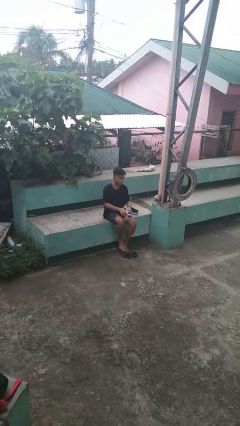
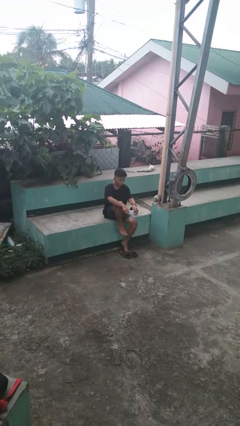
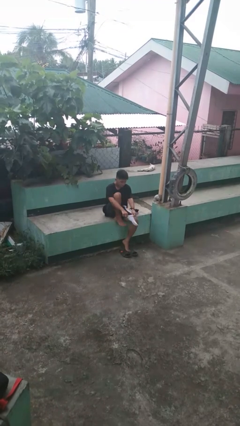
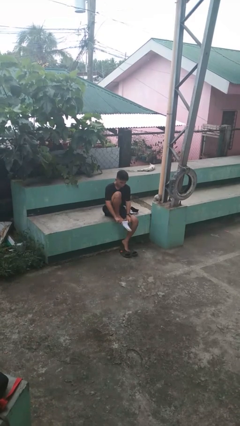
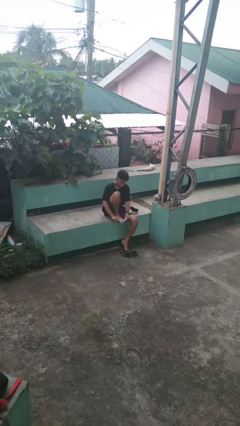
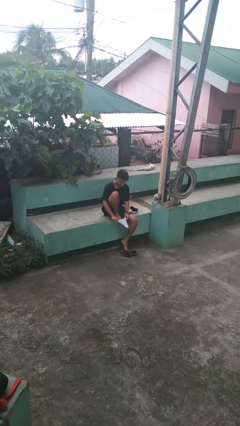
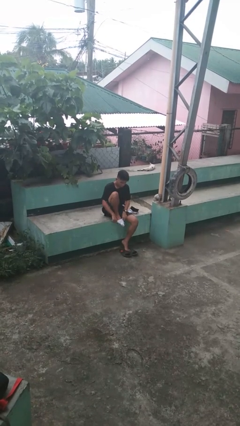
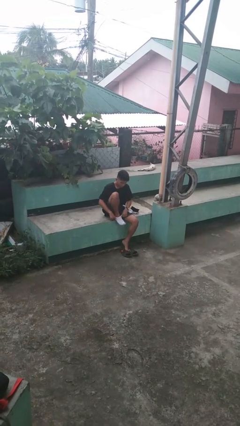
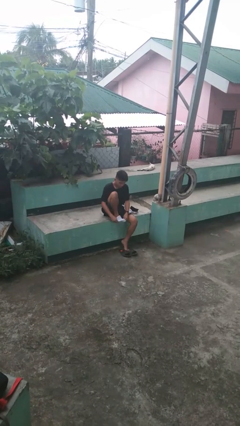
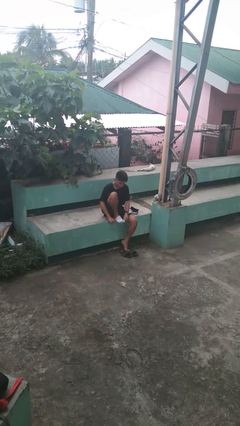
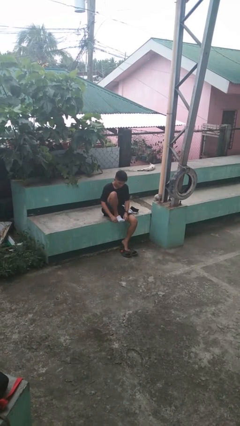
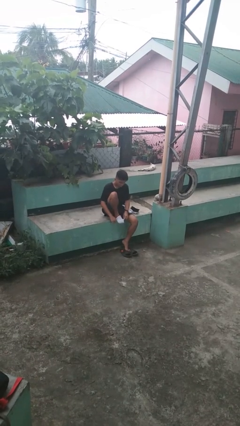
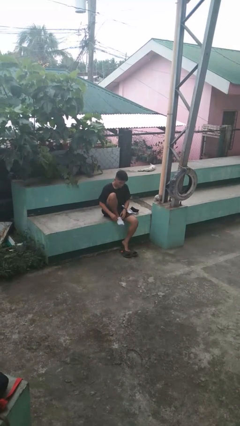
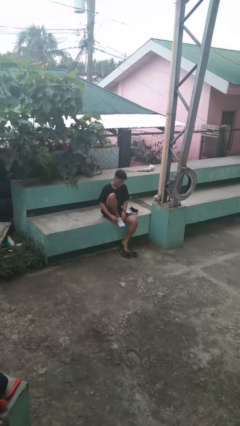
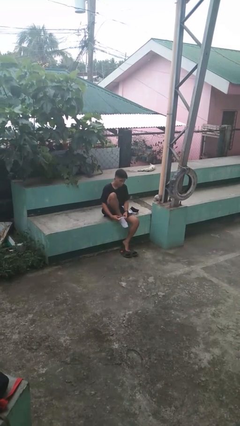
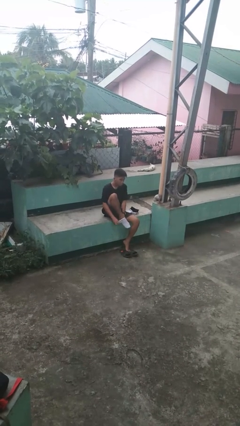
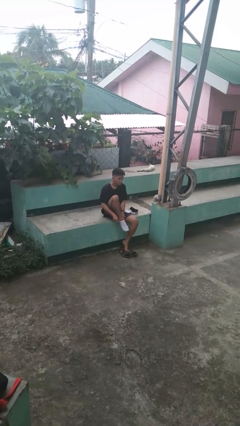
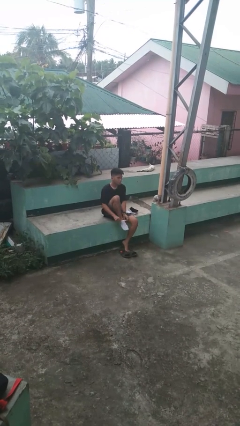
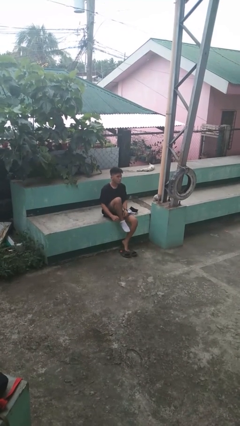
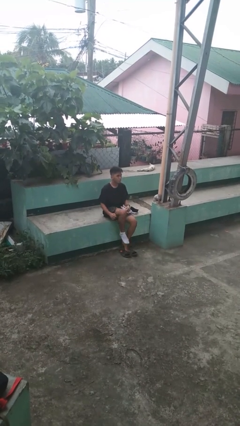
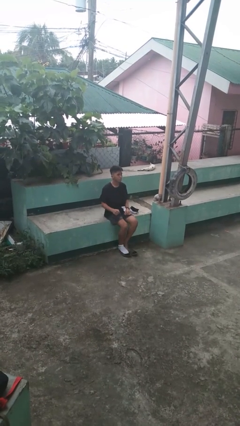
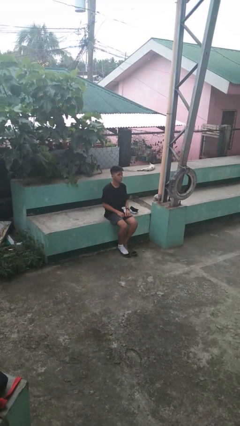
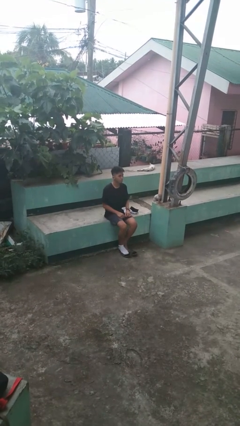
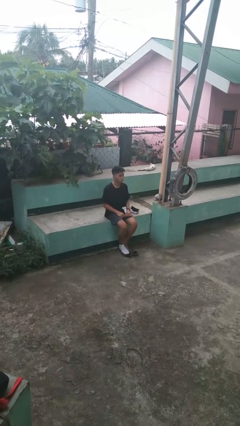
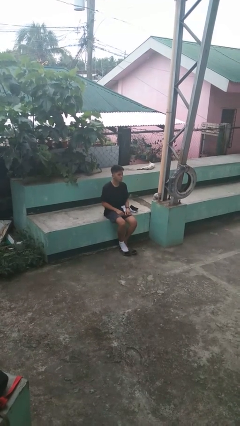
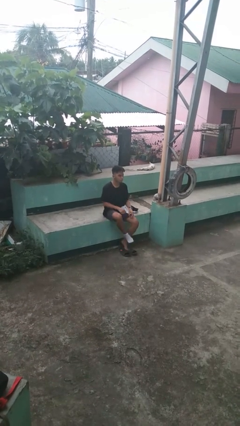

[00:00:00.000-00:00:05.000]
person puts on socks

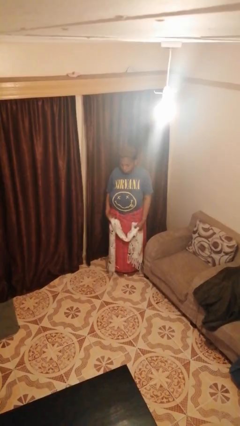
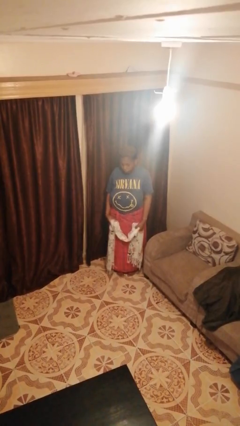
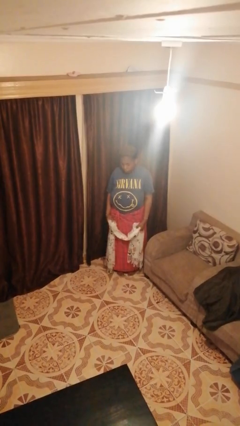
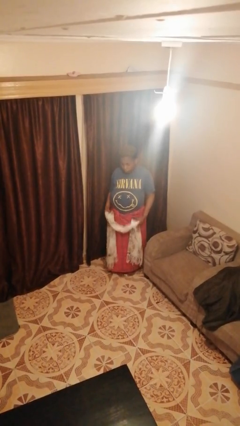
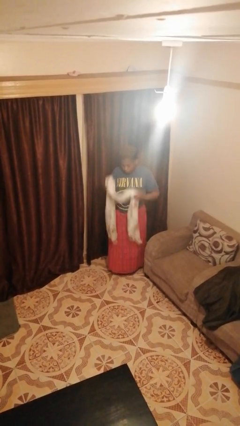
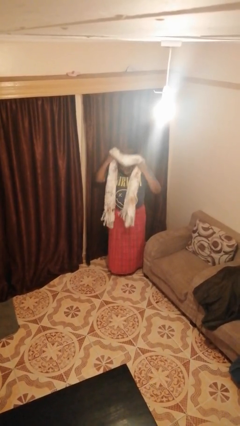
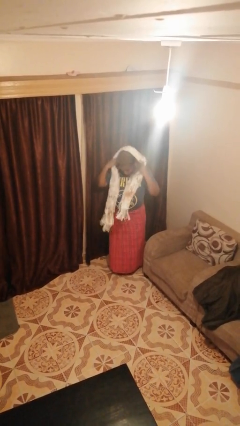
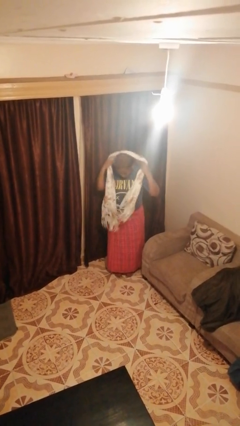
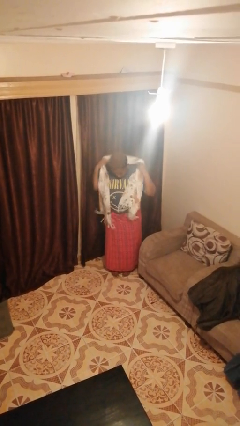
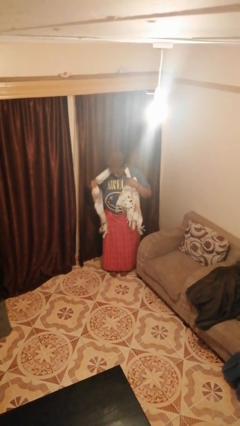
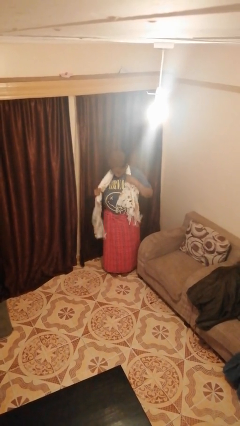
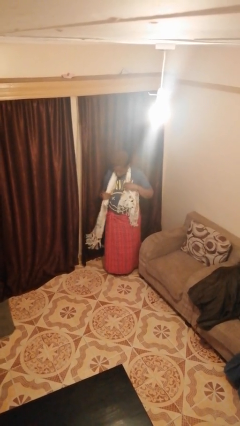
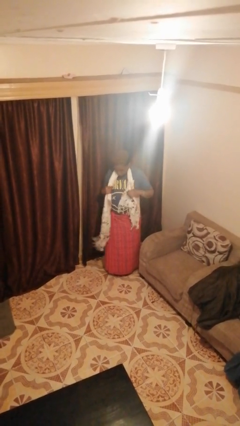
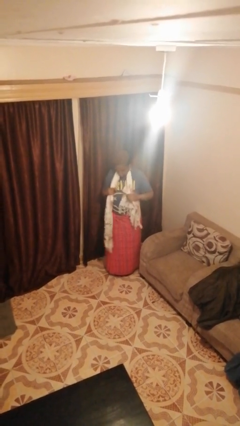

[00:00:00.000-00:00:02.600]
person puts on scarf

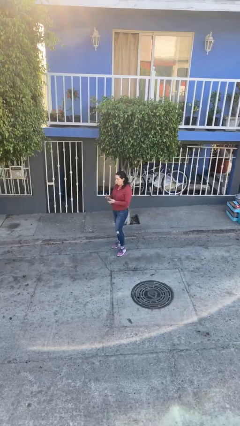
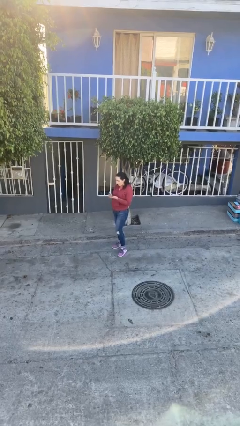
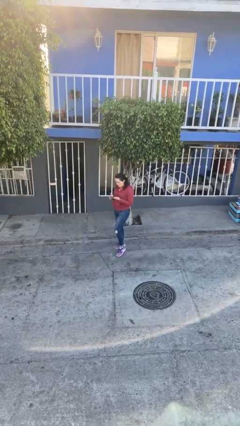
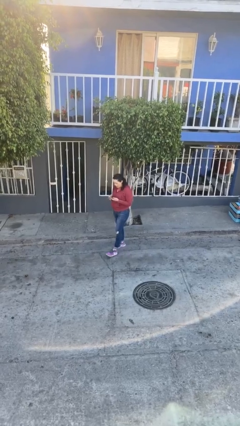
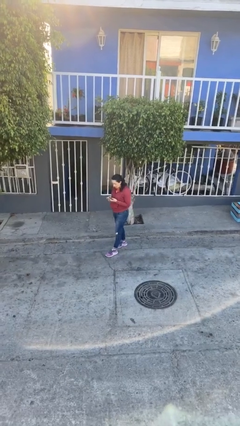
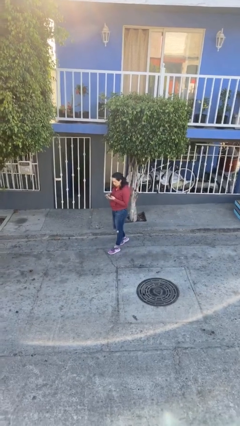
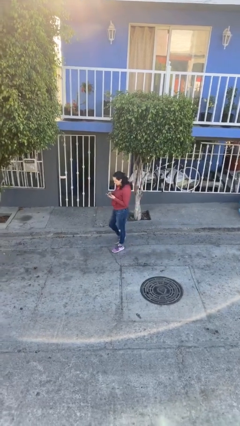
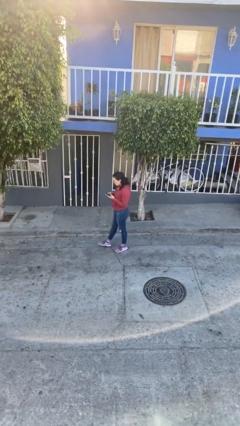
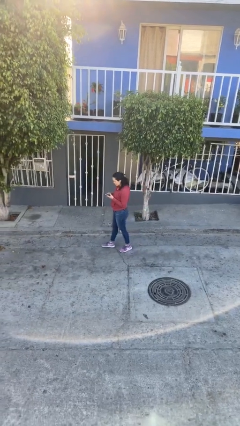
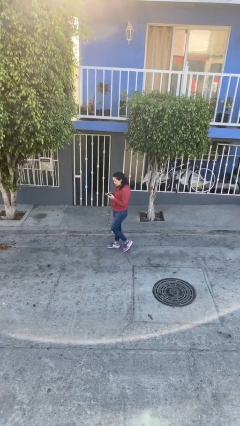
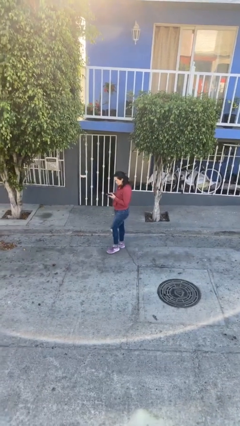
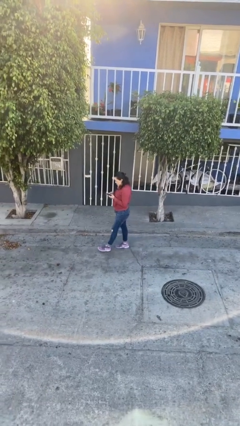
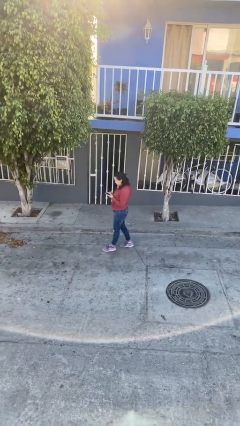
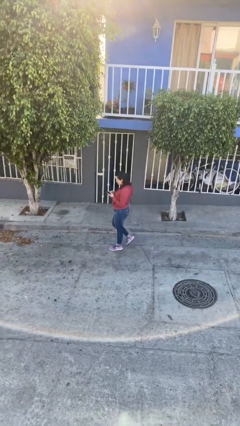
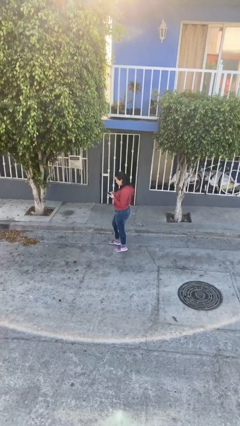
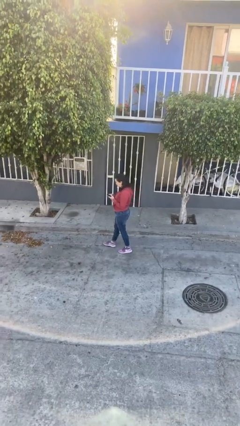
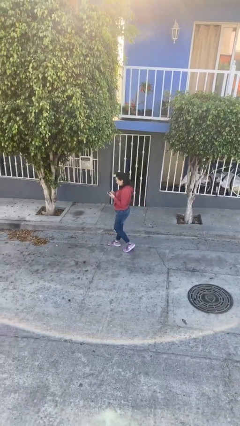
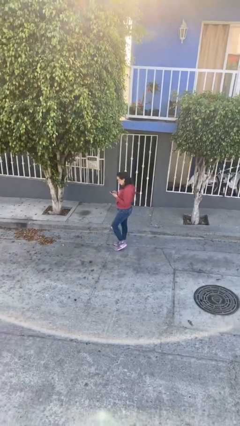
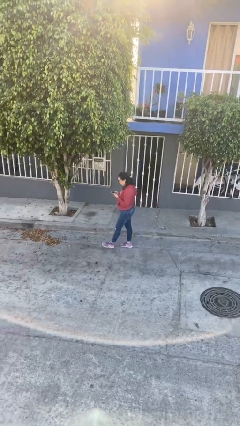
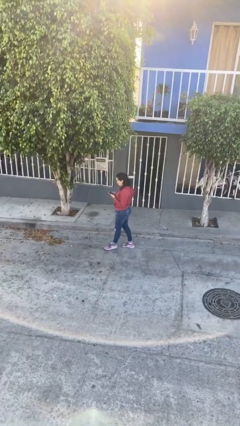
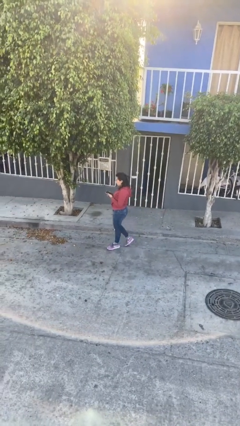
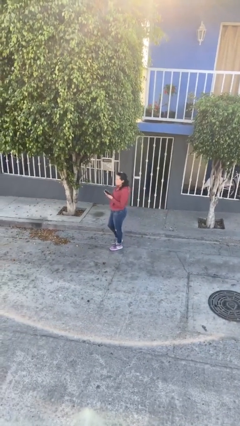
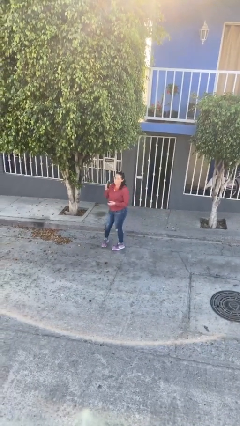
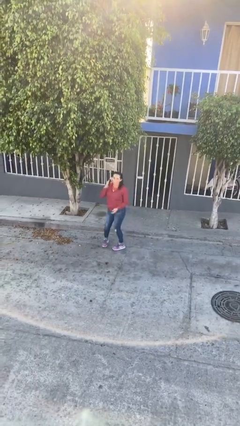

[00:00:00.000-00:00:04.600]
person texts on phone

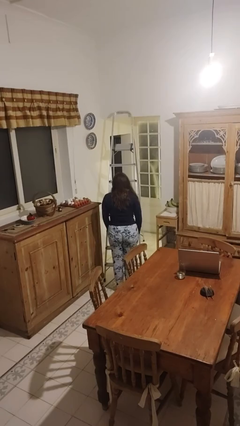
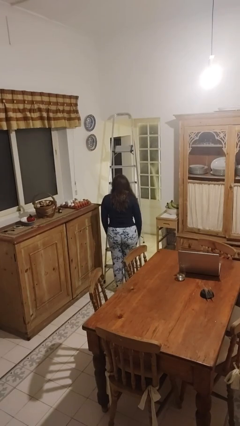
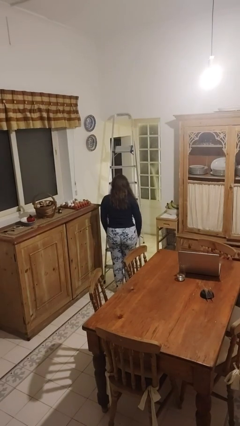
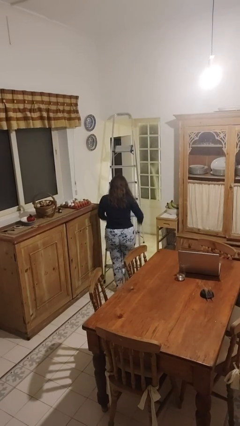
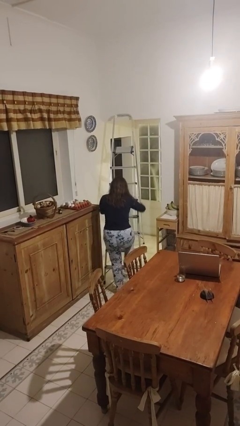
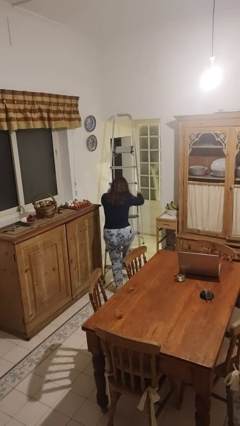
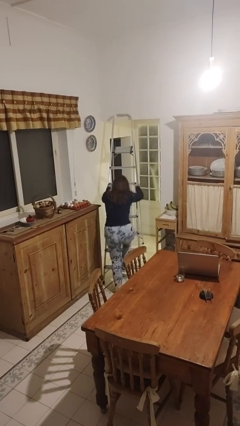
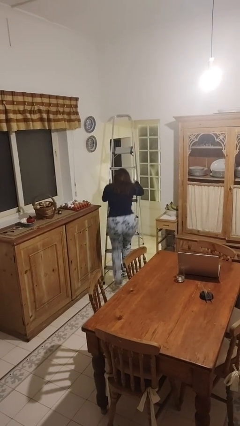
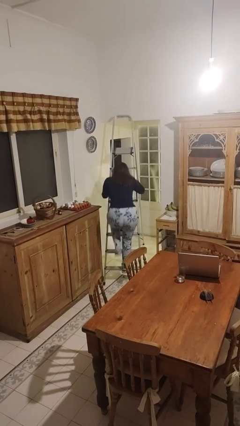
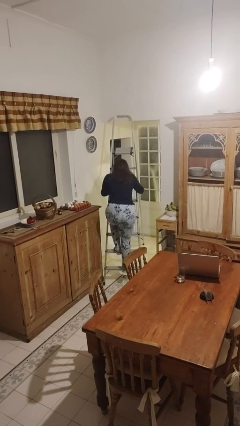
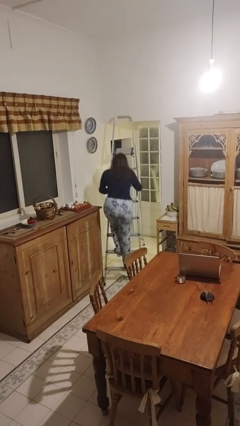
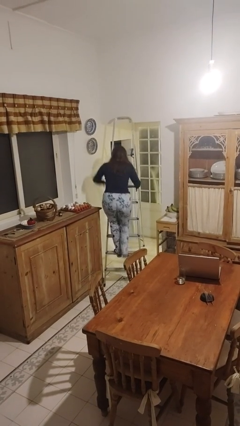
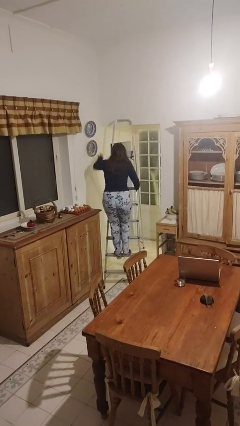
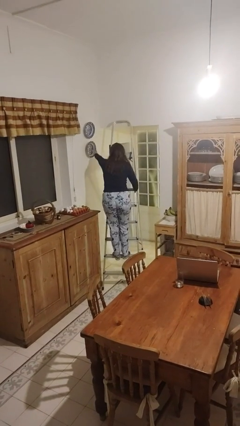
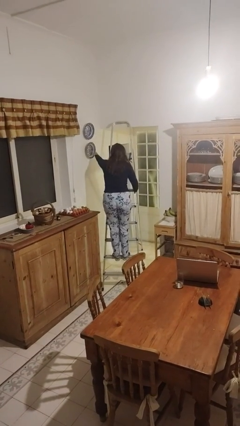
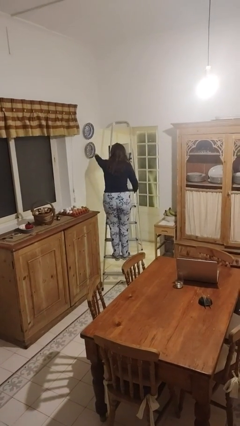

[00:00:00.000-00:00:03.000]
person climbs up ladder

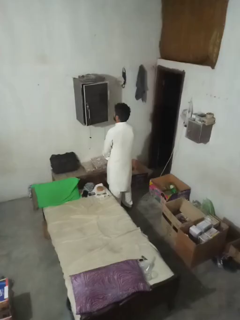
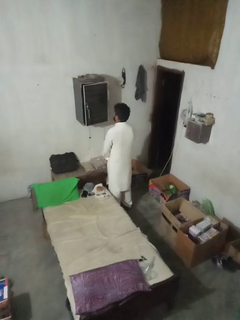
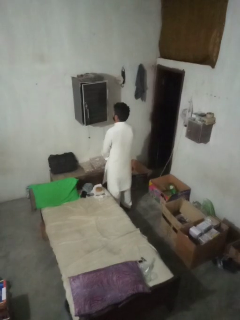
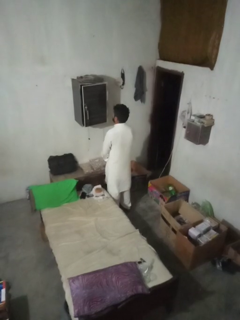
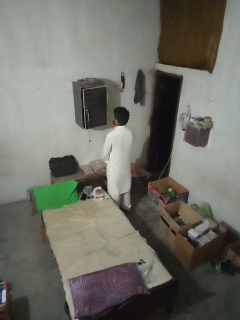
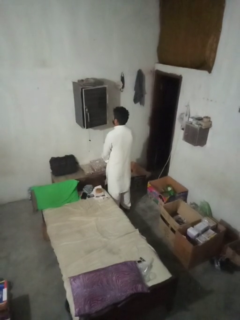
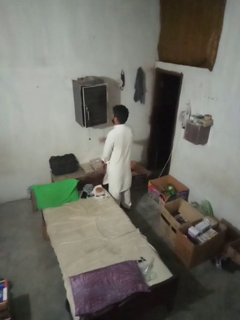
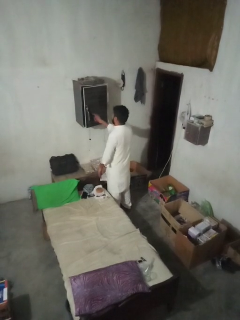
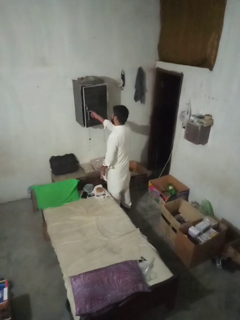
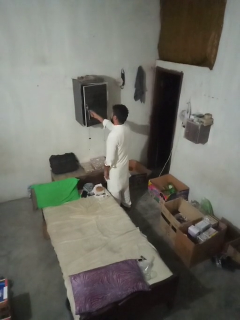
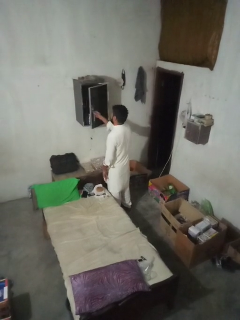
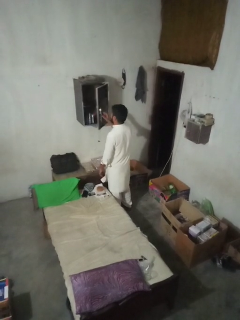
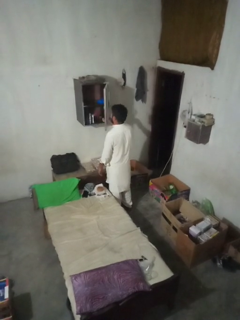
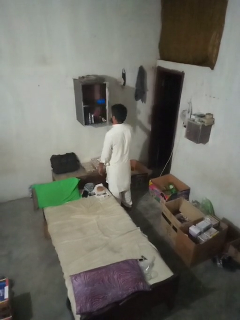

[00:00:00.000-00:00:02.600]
person opens closet door

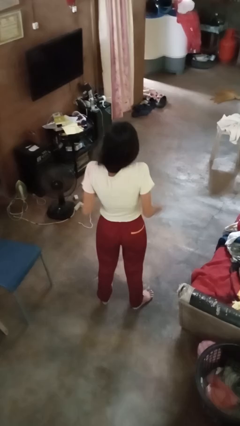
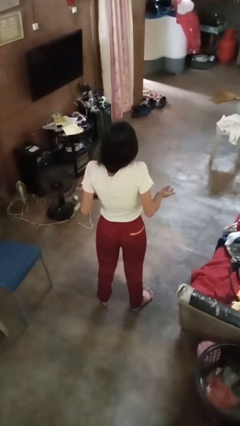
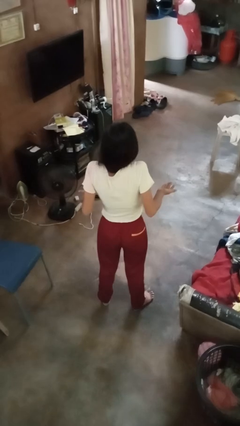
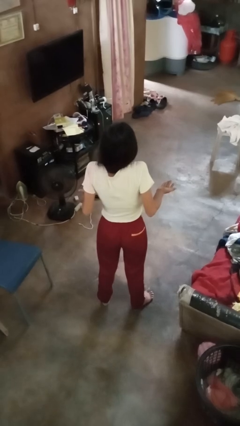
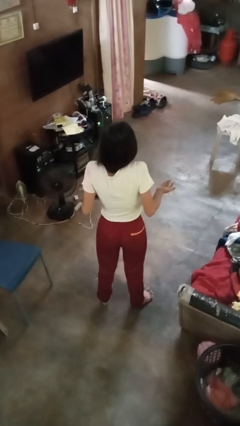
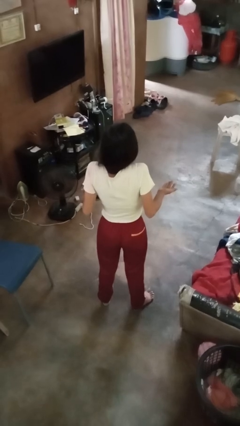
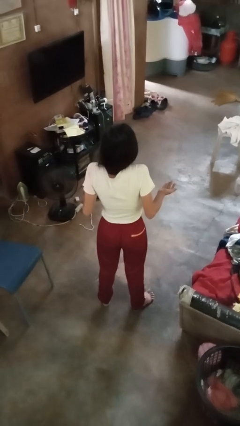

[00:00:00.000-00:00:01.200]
person shrugs
